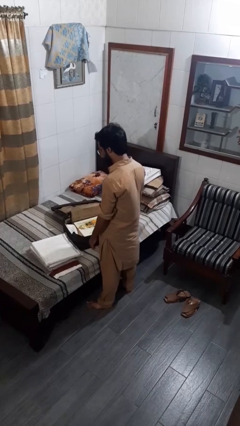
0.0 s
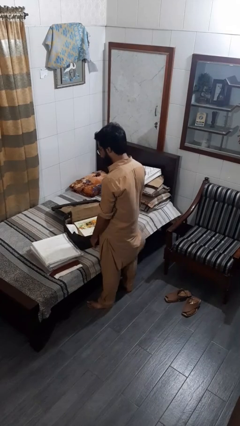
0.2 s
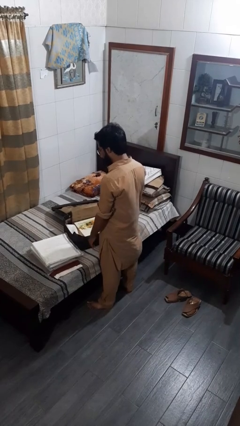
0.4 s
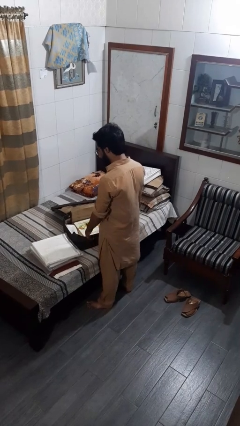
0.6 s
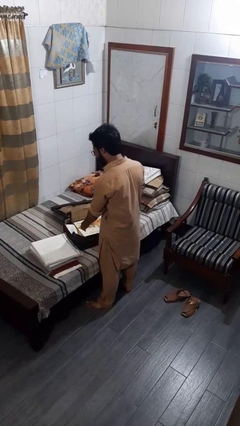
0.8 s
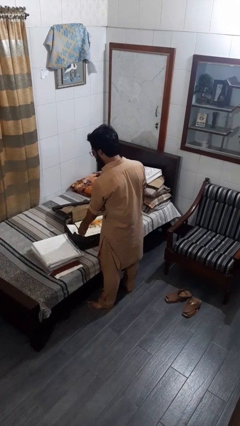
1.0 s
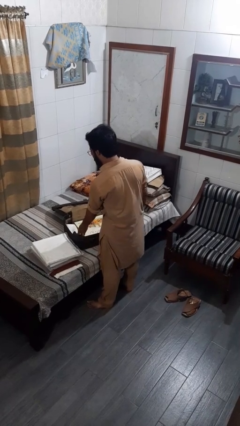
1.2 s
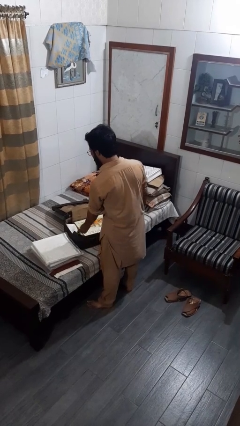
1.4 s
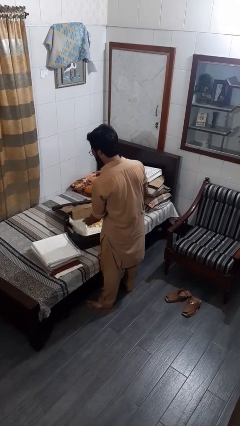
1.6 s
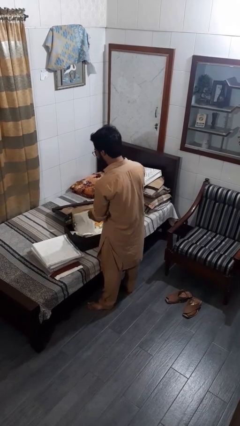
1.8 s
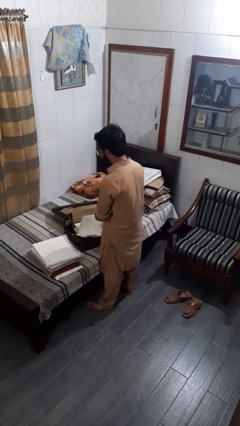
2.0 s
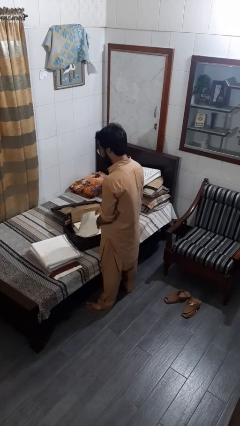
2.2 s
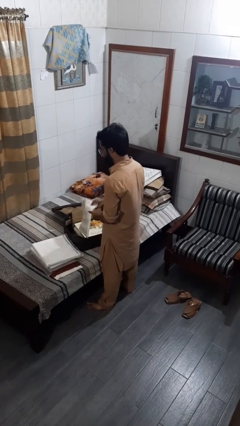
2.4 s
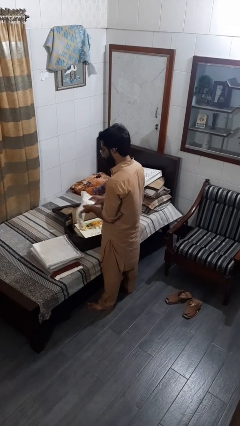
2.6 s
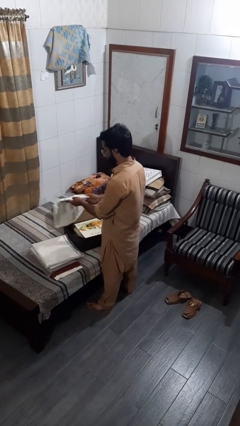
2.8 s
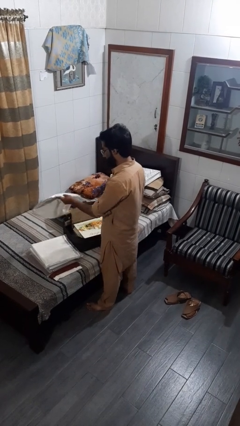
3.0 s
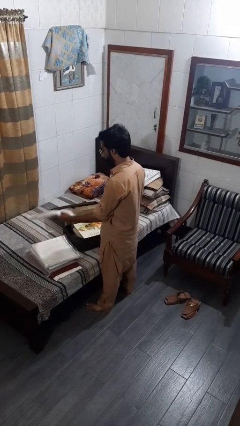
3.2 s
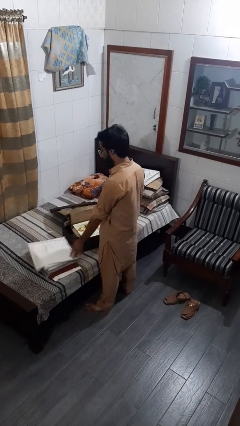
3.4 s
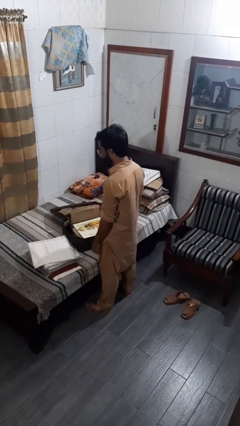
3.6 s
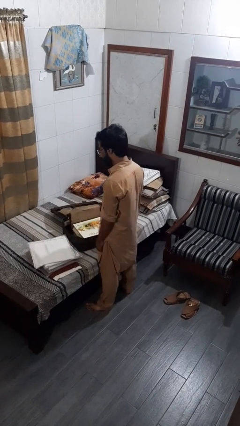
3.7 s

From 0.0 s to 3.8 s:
person unloads clothes from suitcase

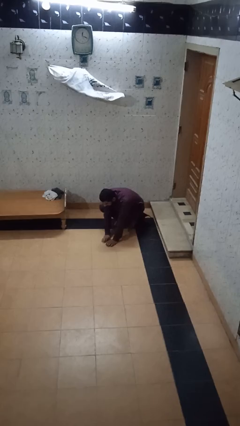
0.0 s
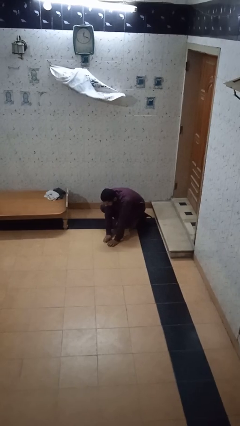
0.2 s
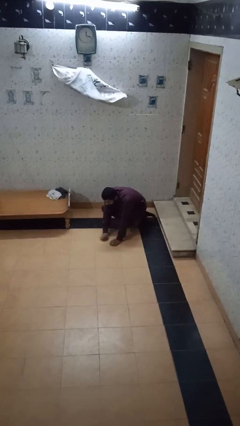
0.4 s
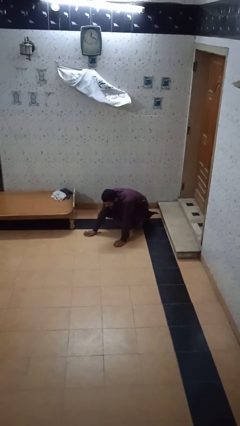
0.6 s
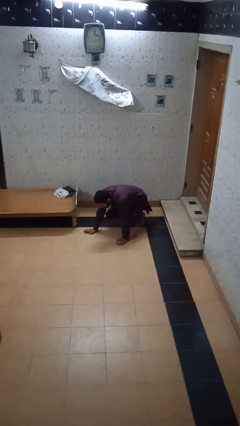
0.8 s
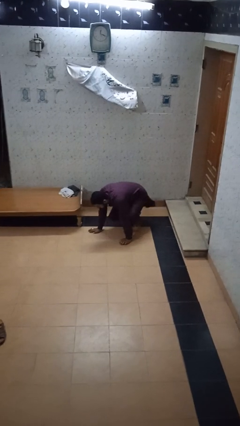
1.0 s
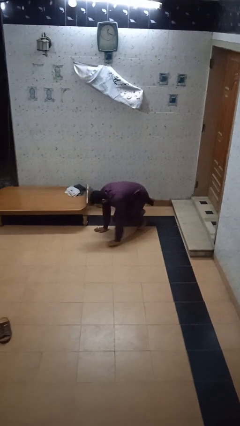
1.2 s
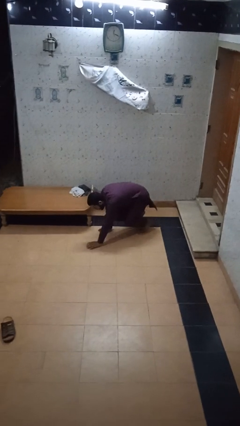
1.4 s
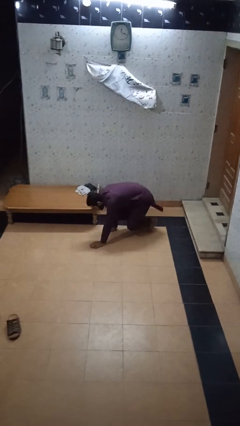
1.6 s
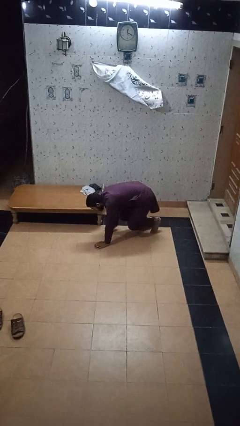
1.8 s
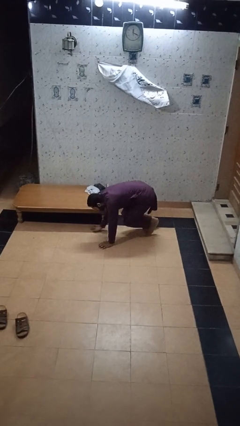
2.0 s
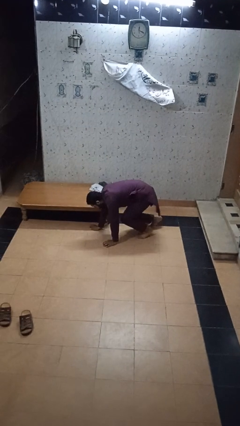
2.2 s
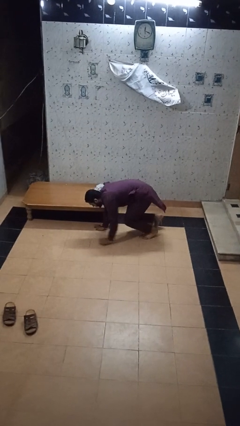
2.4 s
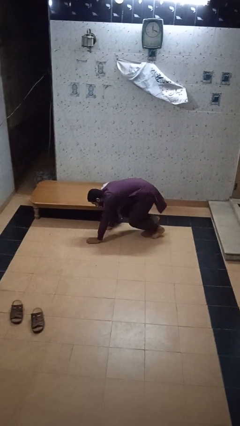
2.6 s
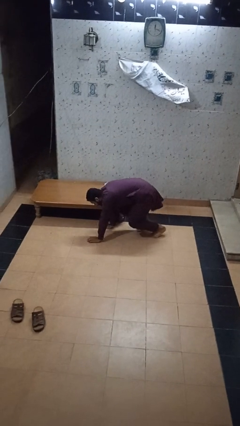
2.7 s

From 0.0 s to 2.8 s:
person crawls

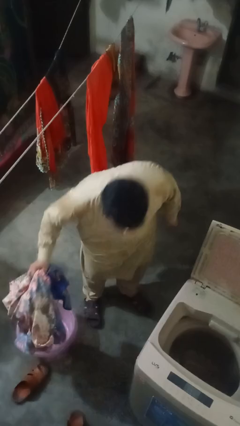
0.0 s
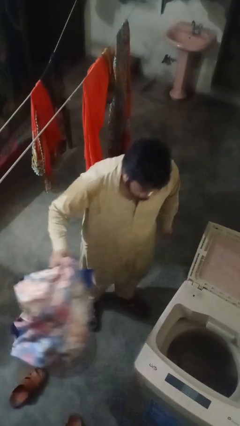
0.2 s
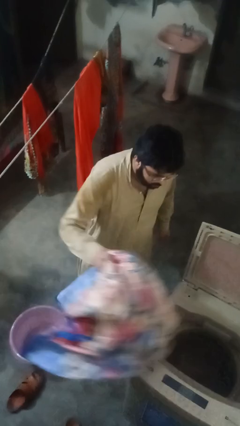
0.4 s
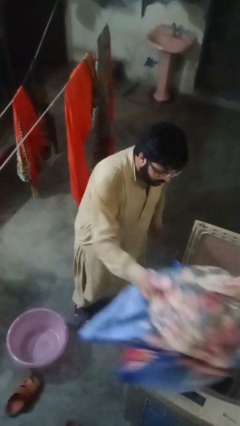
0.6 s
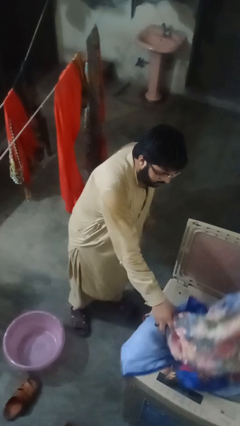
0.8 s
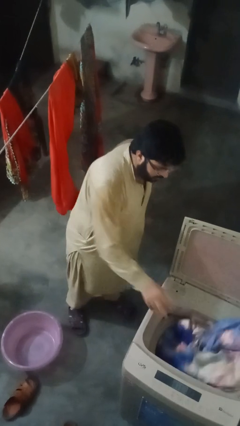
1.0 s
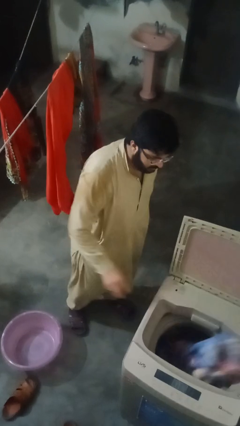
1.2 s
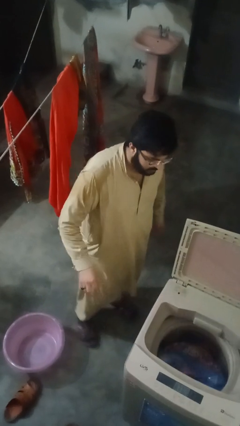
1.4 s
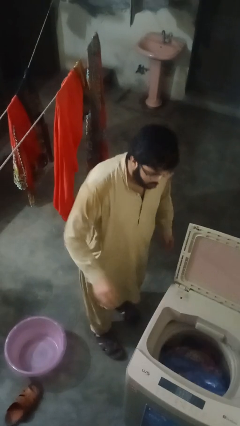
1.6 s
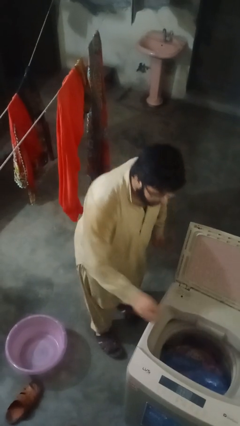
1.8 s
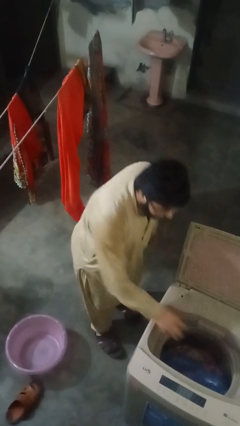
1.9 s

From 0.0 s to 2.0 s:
person loads clotheswasher

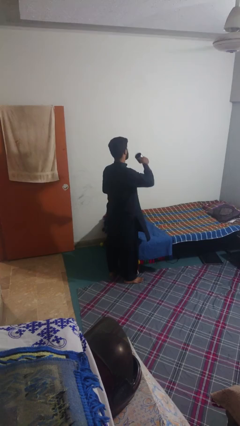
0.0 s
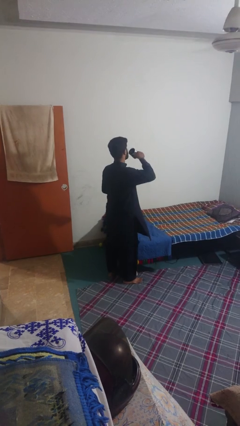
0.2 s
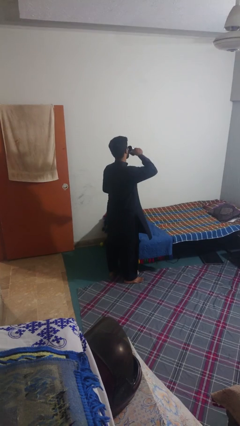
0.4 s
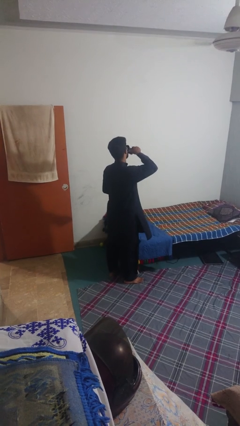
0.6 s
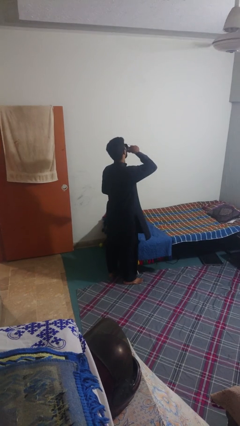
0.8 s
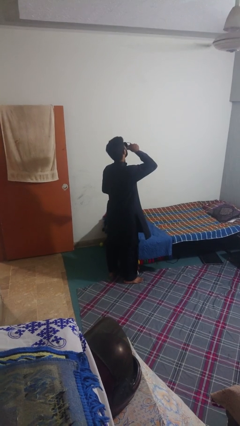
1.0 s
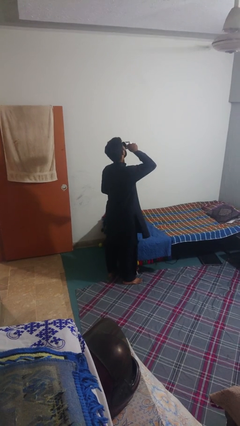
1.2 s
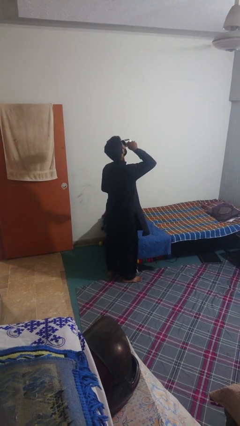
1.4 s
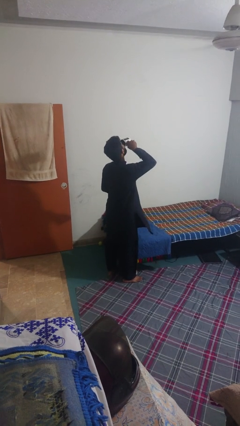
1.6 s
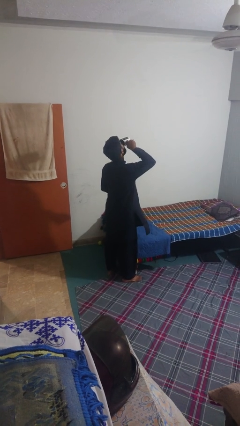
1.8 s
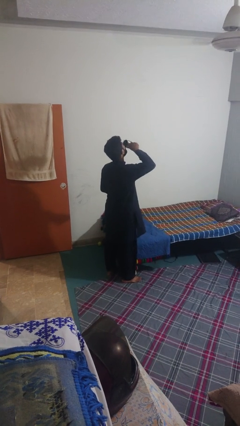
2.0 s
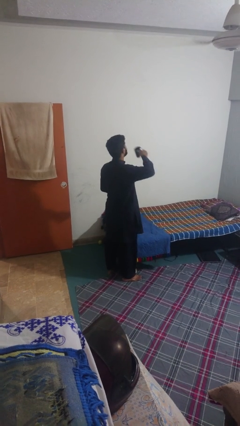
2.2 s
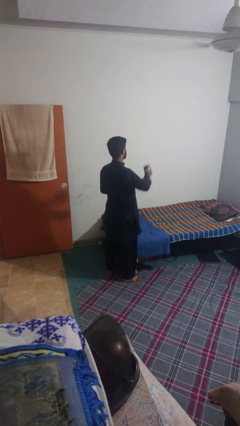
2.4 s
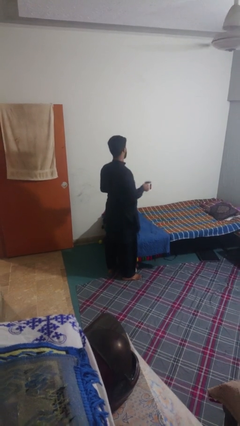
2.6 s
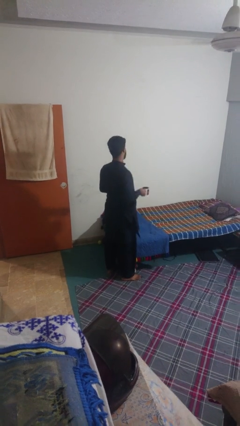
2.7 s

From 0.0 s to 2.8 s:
person drinks from mug

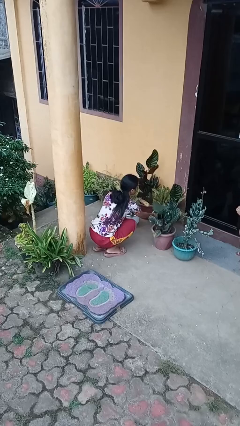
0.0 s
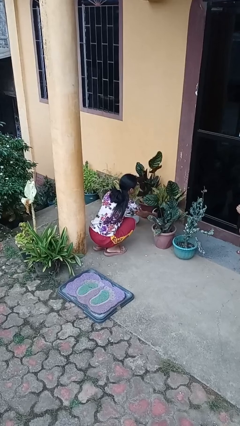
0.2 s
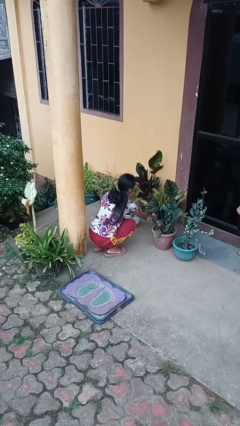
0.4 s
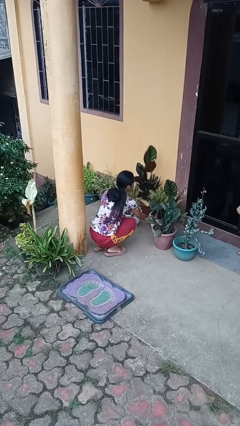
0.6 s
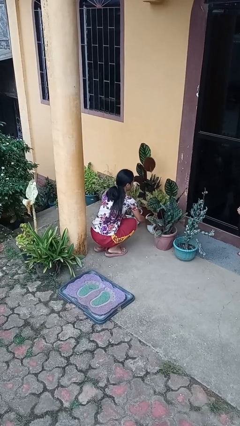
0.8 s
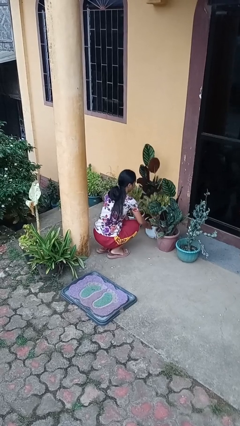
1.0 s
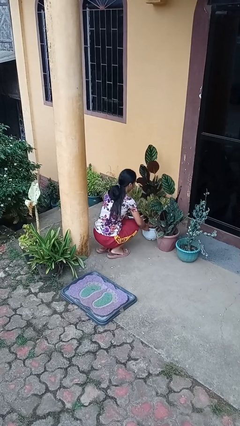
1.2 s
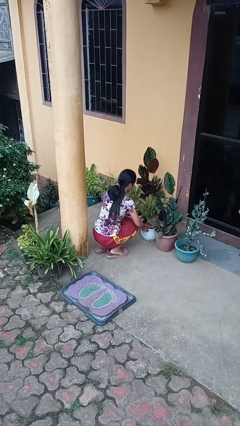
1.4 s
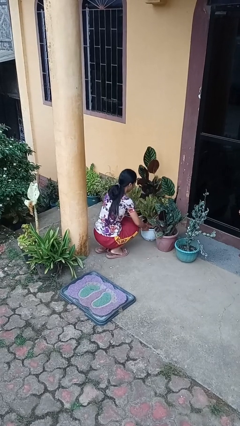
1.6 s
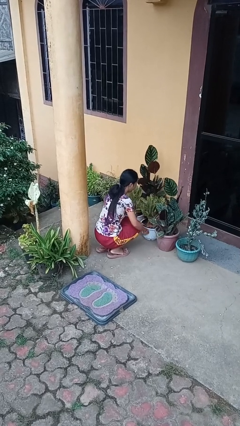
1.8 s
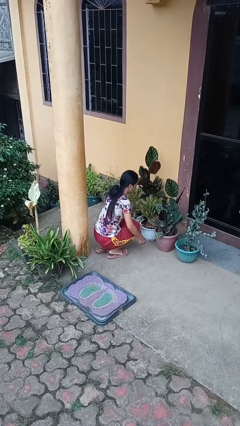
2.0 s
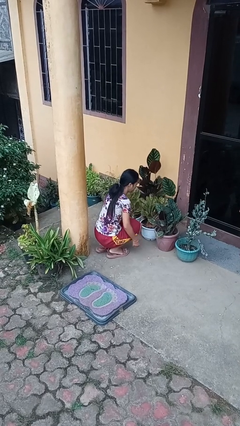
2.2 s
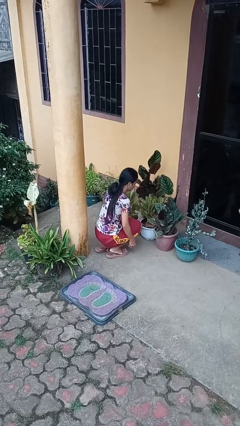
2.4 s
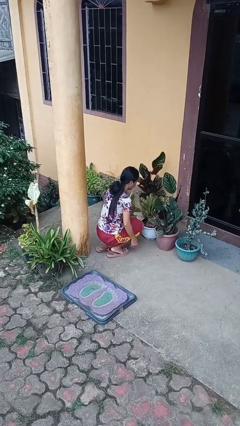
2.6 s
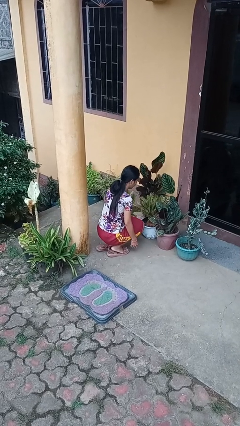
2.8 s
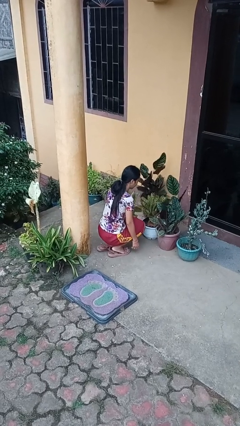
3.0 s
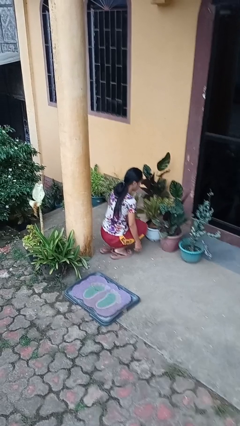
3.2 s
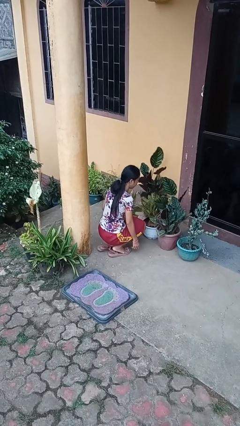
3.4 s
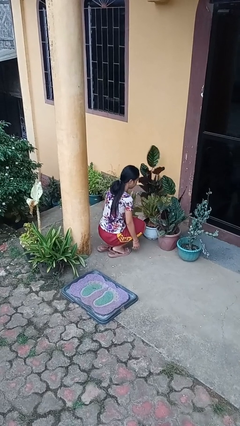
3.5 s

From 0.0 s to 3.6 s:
person arranges flowers in vase

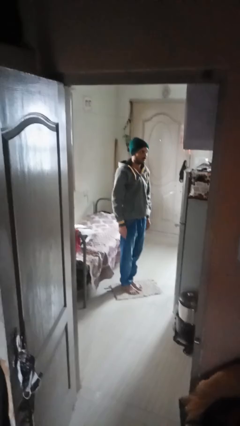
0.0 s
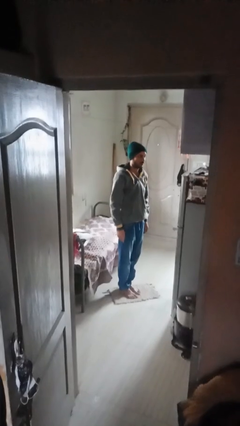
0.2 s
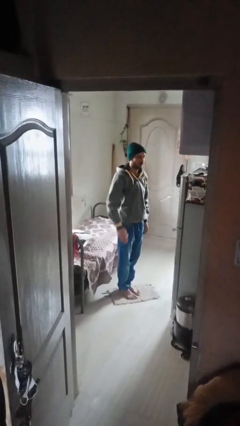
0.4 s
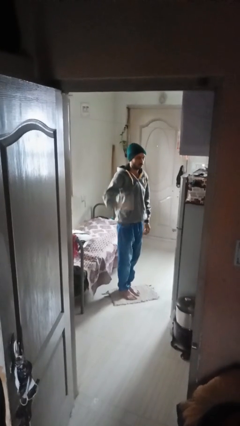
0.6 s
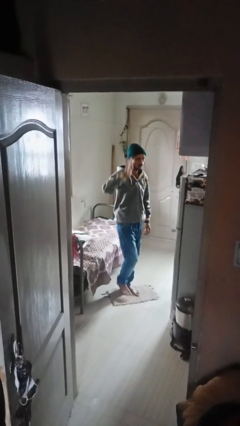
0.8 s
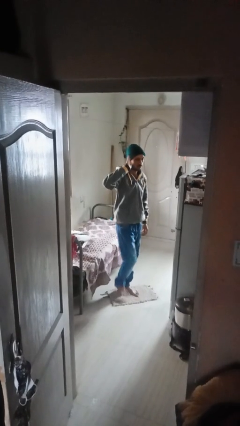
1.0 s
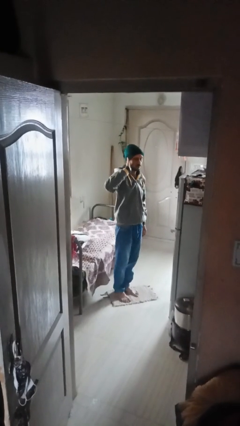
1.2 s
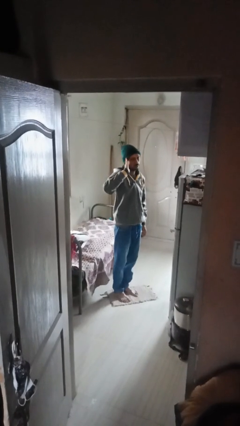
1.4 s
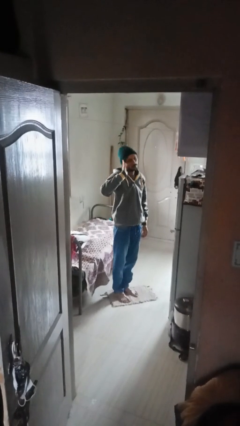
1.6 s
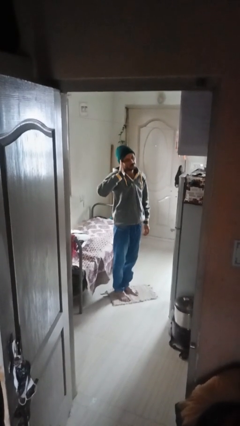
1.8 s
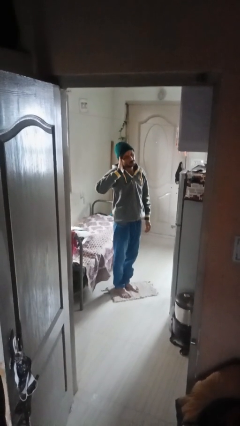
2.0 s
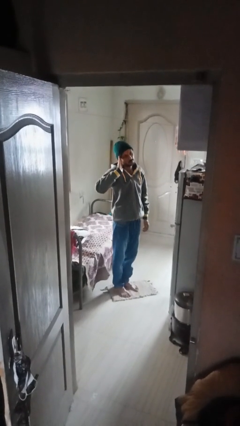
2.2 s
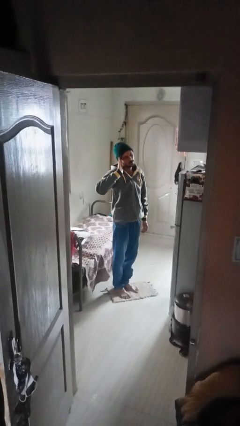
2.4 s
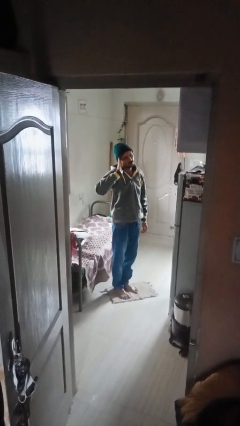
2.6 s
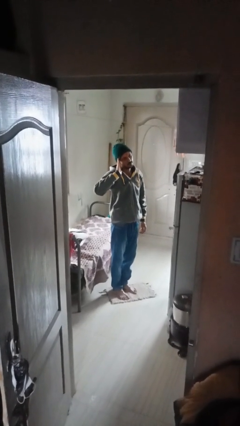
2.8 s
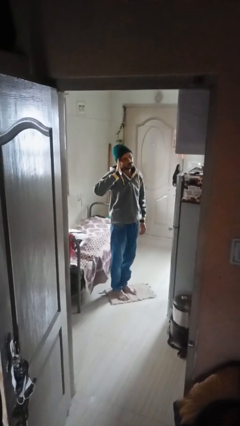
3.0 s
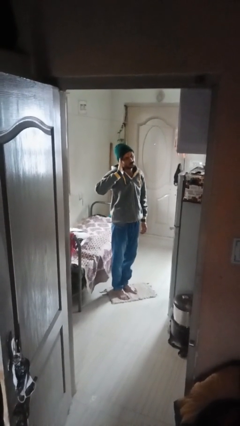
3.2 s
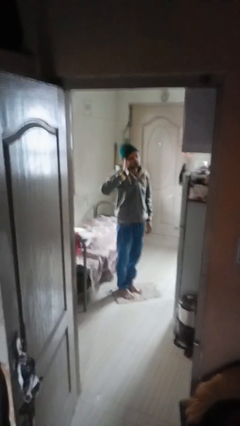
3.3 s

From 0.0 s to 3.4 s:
person salutes
